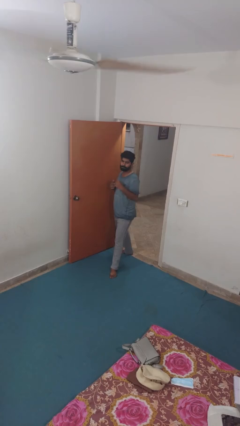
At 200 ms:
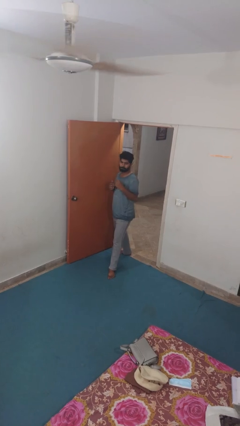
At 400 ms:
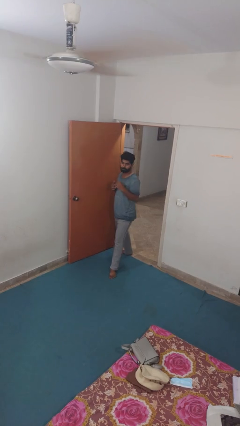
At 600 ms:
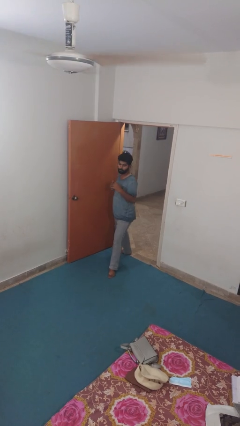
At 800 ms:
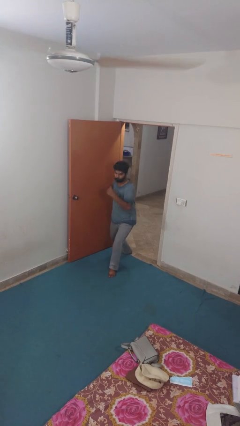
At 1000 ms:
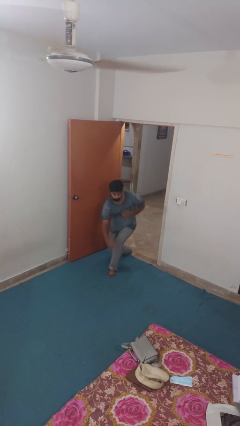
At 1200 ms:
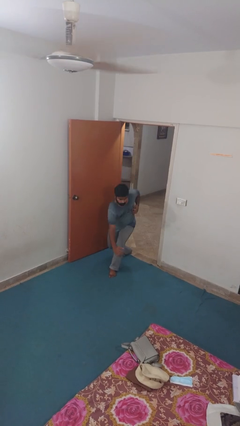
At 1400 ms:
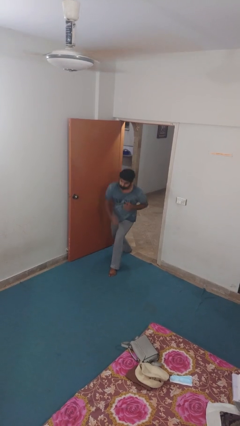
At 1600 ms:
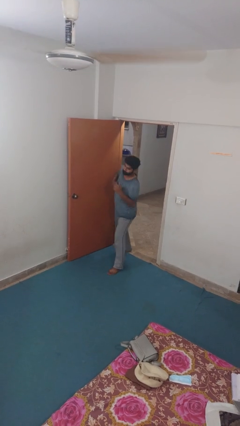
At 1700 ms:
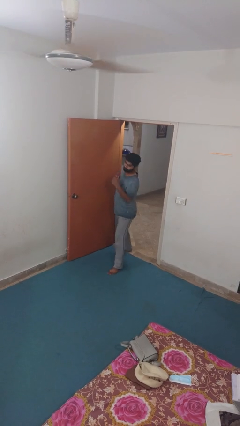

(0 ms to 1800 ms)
person karate chop

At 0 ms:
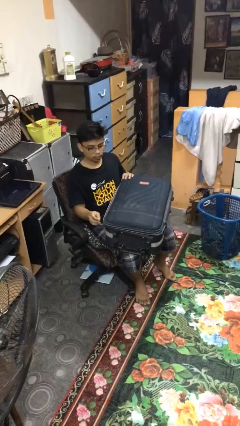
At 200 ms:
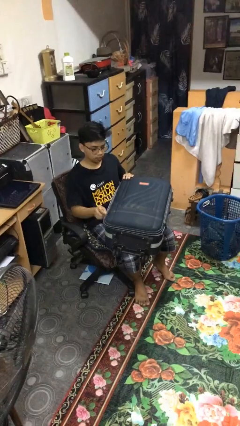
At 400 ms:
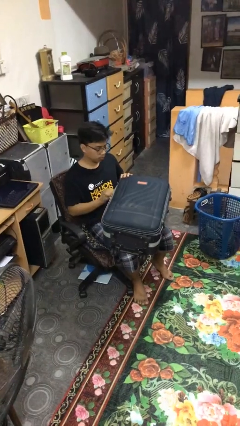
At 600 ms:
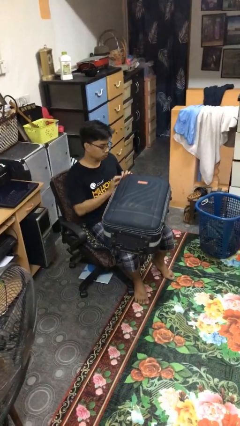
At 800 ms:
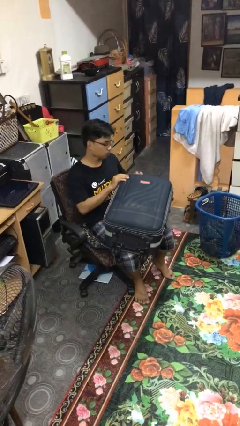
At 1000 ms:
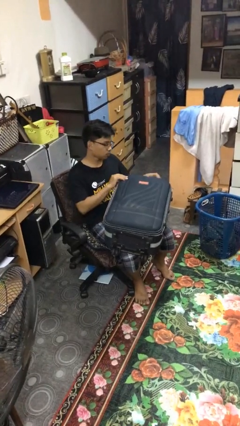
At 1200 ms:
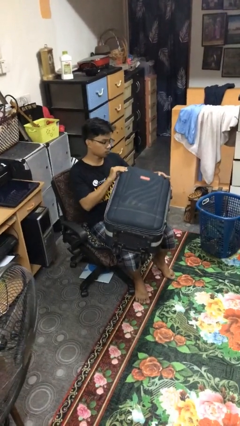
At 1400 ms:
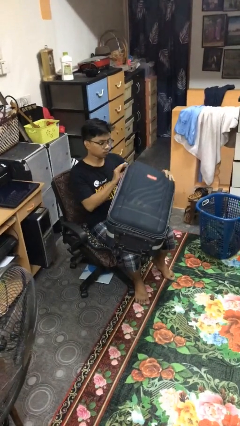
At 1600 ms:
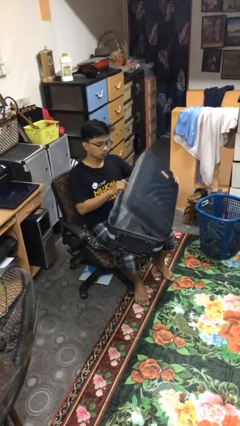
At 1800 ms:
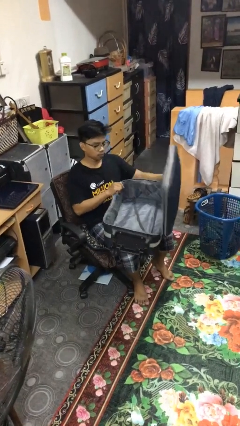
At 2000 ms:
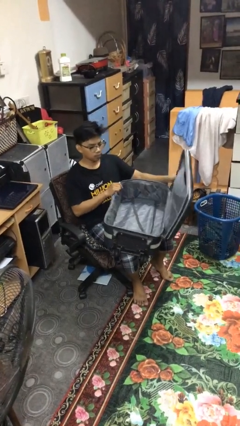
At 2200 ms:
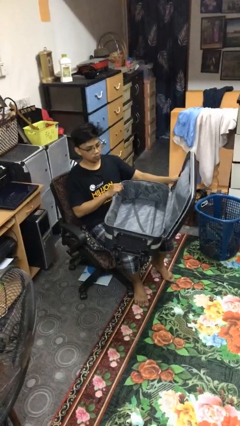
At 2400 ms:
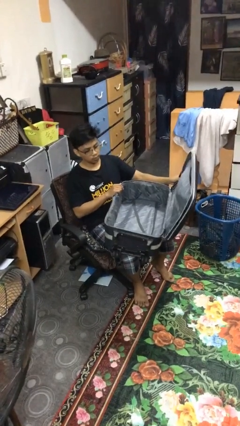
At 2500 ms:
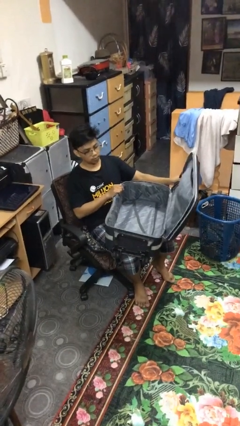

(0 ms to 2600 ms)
person opens suitcase

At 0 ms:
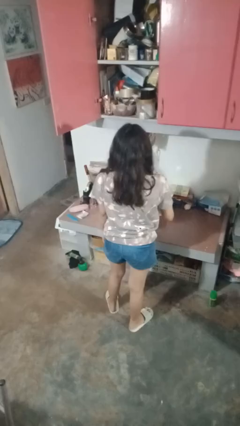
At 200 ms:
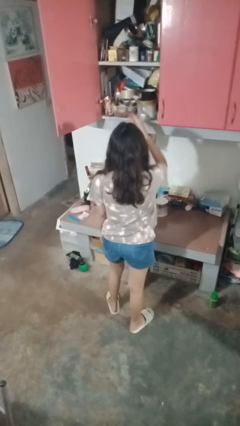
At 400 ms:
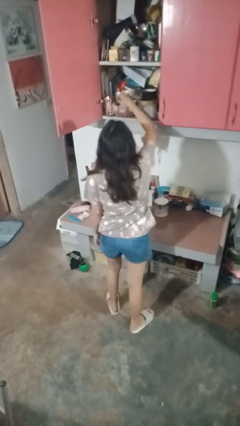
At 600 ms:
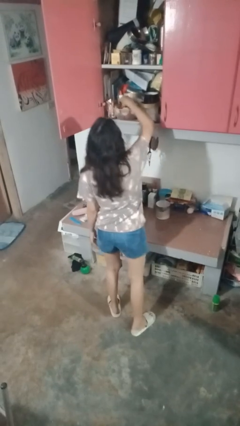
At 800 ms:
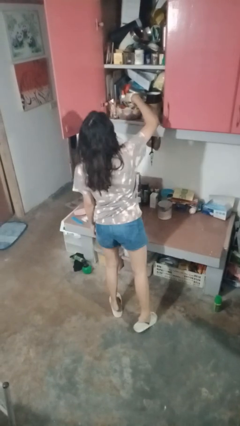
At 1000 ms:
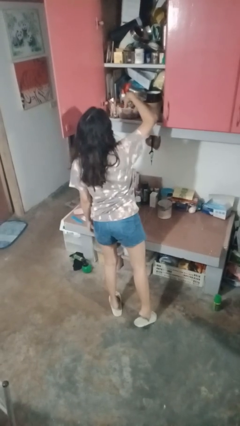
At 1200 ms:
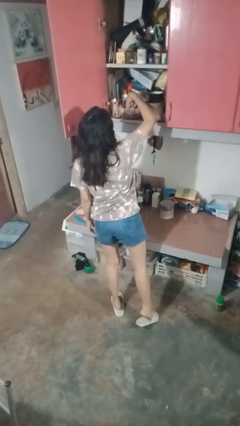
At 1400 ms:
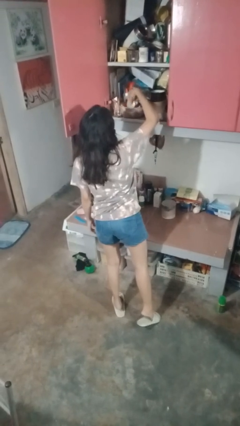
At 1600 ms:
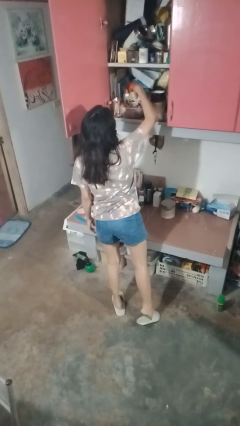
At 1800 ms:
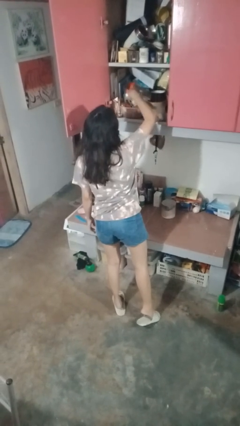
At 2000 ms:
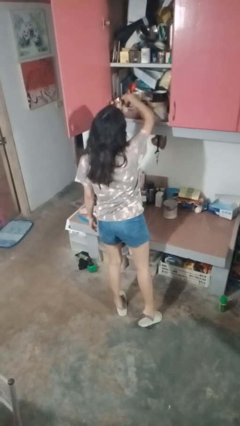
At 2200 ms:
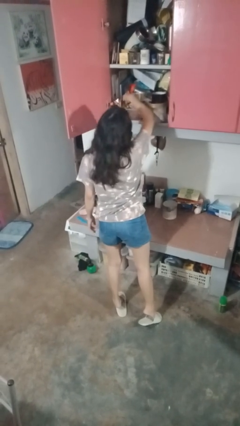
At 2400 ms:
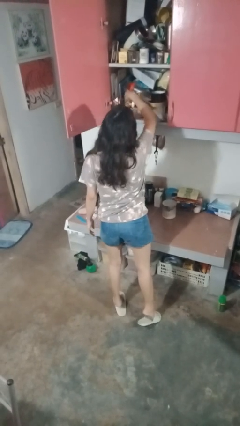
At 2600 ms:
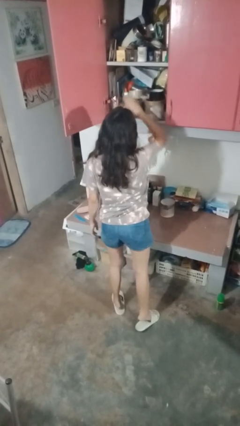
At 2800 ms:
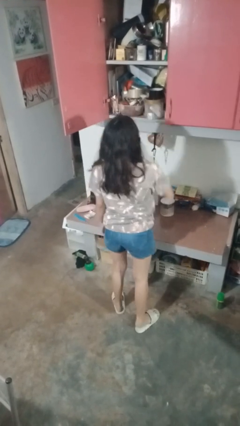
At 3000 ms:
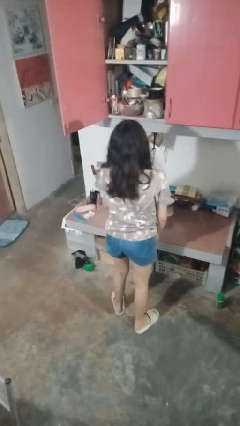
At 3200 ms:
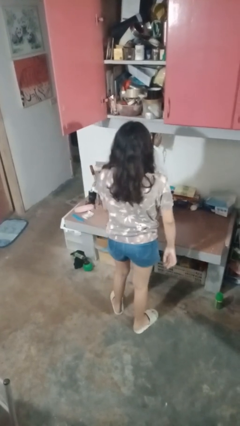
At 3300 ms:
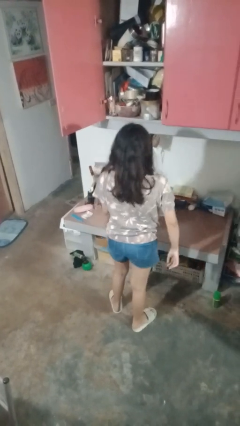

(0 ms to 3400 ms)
person searches in cabinet

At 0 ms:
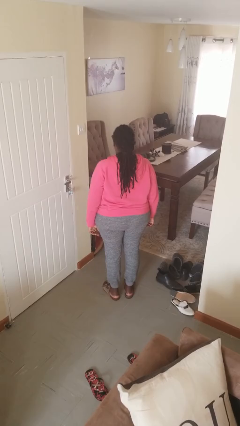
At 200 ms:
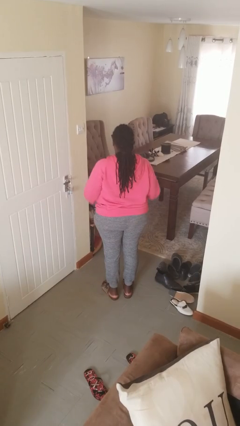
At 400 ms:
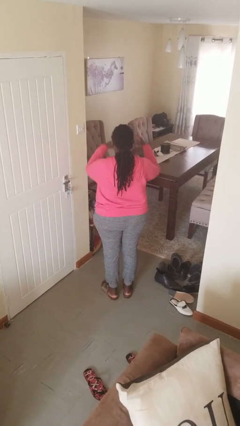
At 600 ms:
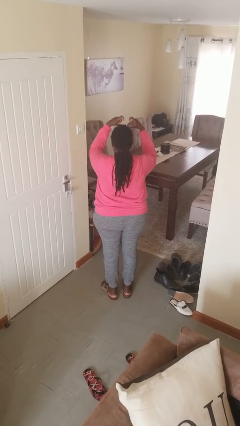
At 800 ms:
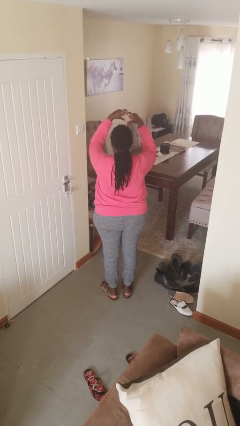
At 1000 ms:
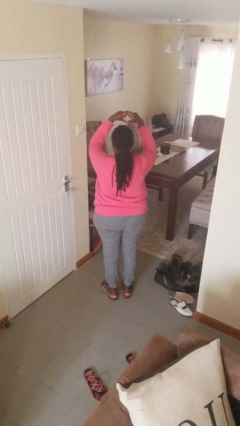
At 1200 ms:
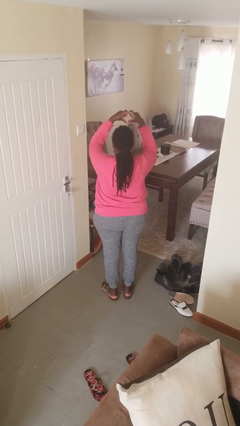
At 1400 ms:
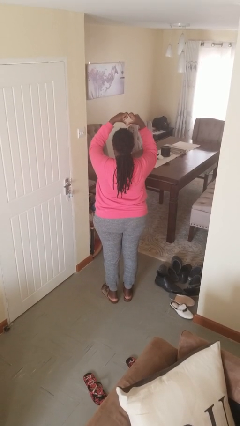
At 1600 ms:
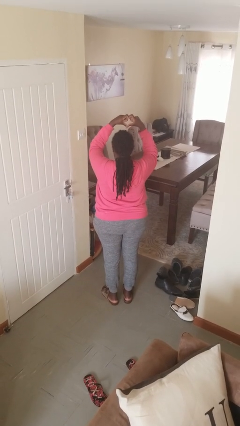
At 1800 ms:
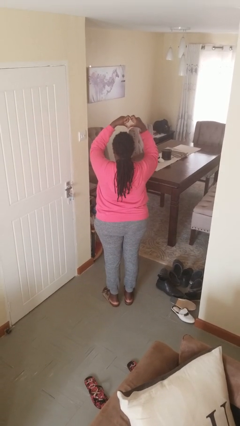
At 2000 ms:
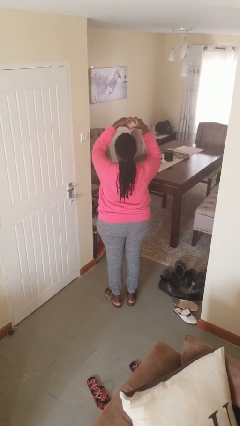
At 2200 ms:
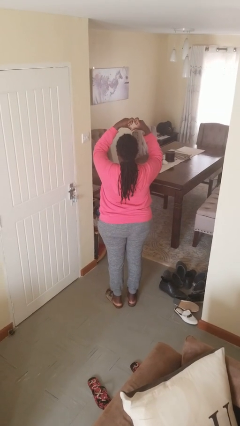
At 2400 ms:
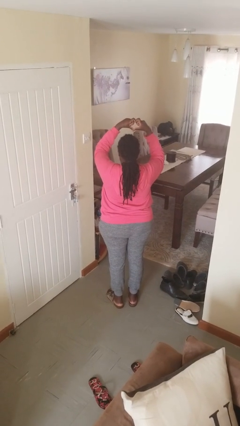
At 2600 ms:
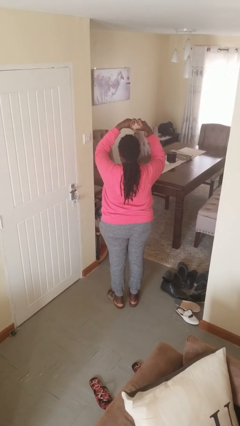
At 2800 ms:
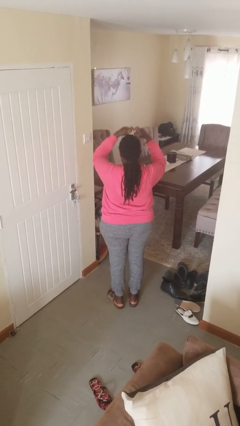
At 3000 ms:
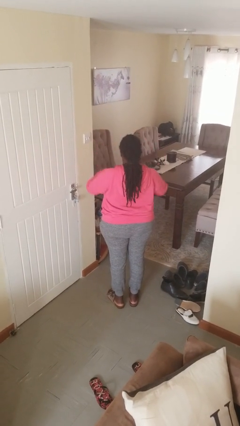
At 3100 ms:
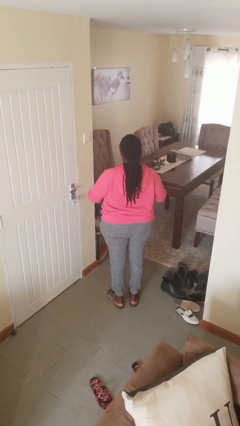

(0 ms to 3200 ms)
person gestures heart

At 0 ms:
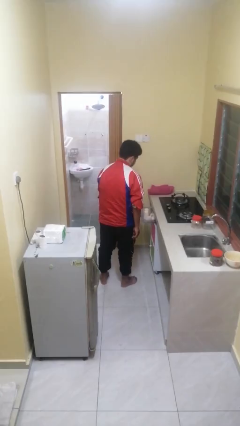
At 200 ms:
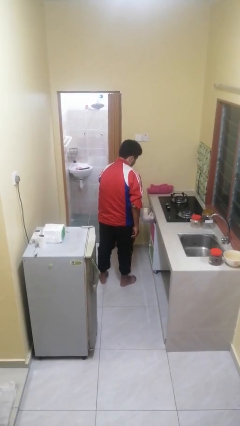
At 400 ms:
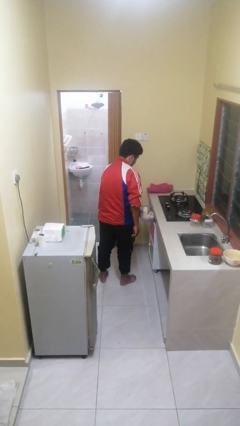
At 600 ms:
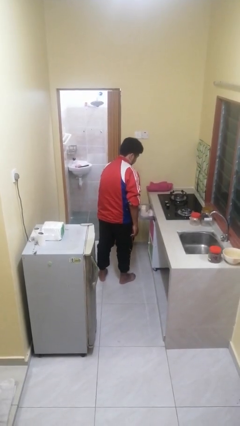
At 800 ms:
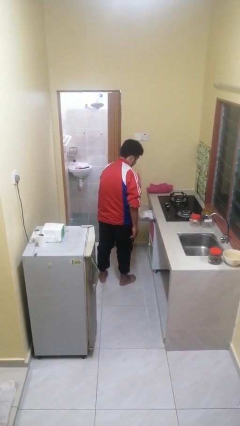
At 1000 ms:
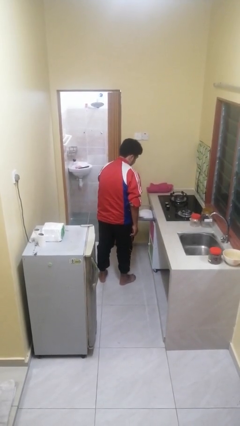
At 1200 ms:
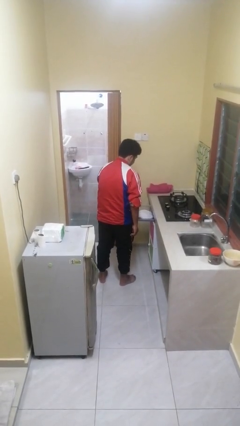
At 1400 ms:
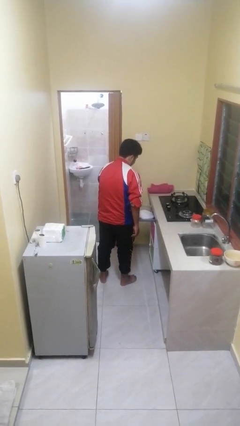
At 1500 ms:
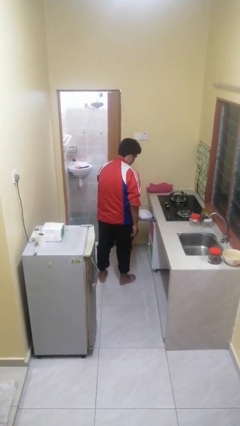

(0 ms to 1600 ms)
person opens kitchen drawer

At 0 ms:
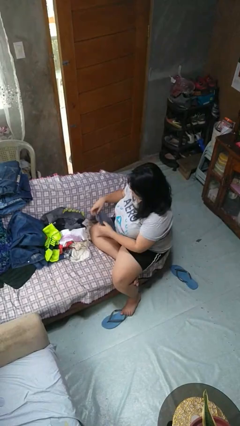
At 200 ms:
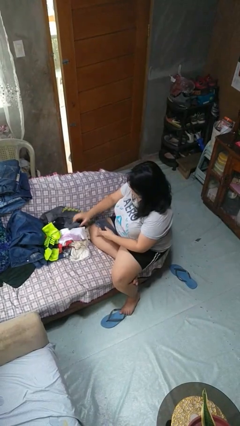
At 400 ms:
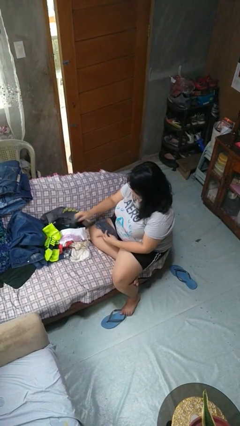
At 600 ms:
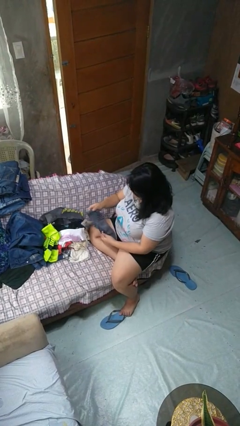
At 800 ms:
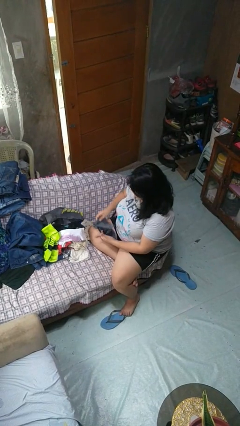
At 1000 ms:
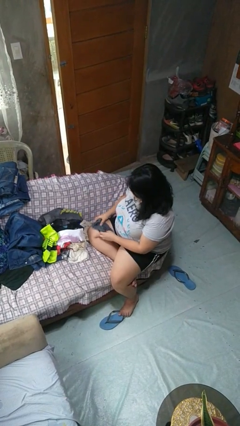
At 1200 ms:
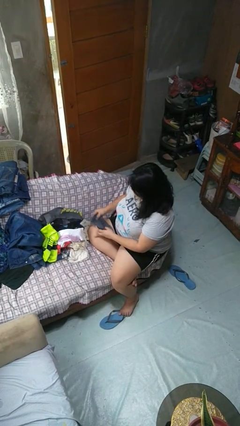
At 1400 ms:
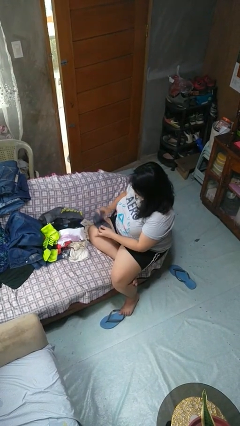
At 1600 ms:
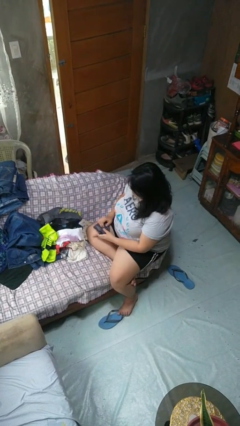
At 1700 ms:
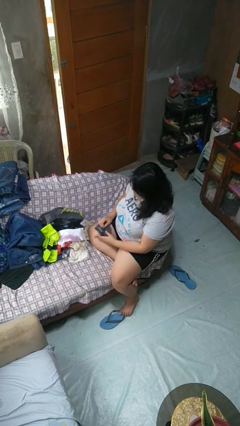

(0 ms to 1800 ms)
person folds socks

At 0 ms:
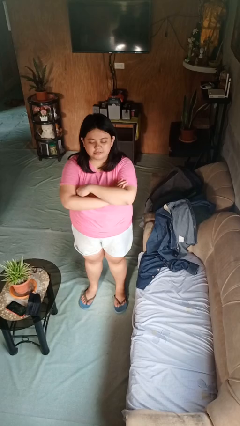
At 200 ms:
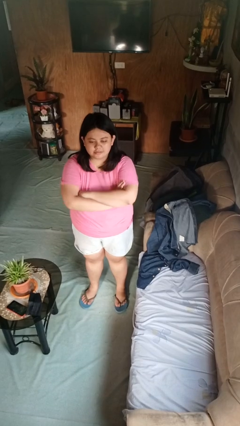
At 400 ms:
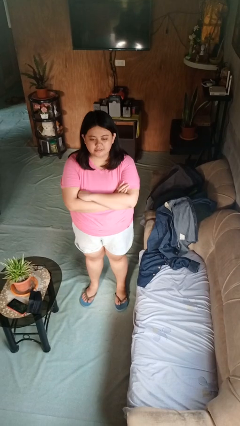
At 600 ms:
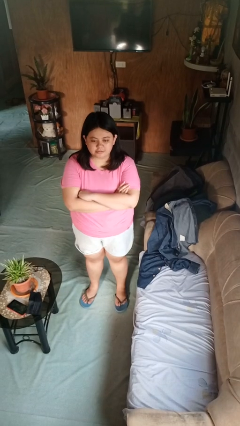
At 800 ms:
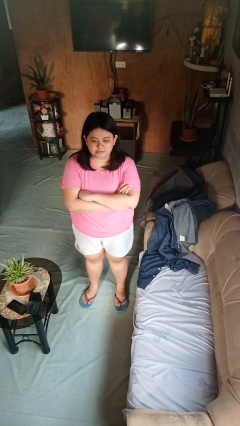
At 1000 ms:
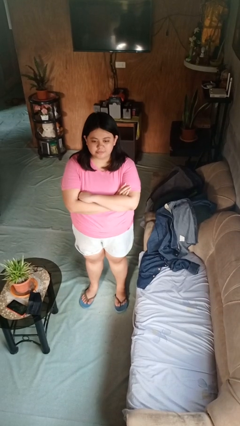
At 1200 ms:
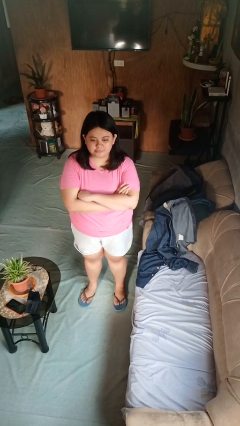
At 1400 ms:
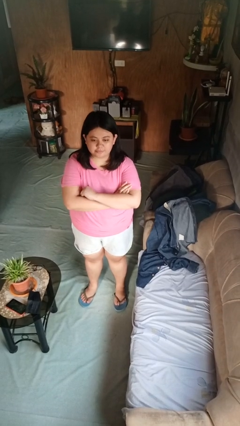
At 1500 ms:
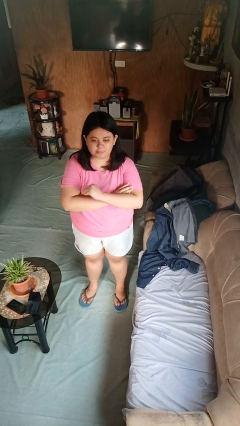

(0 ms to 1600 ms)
person crosses arms

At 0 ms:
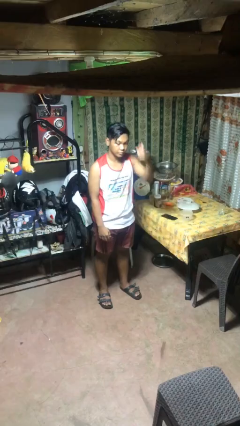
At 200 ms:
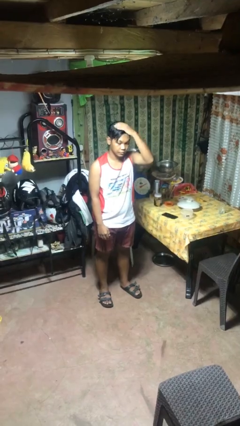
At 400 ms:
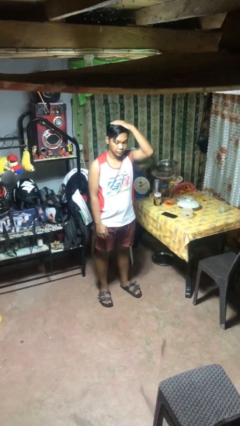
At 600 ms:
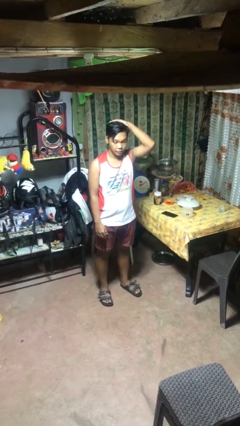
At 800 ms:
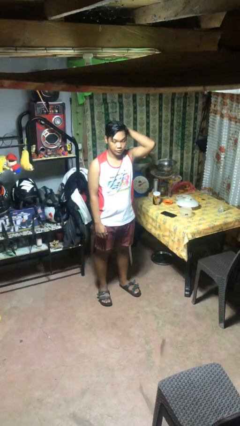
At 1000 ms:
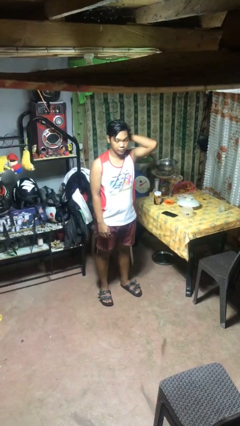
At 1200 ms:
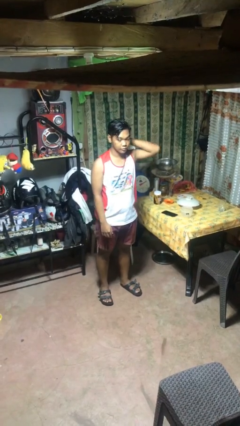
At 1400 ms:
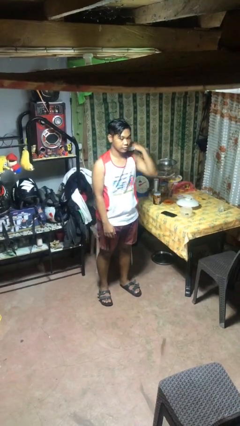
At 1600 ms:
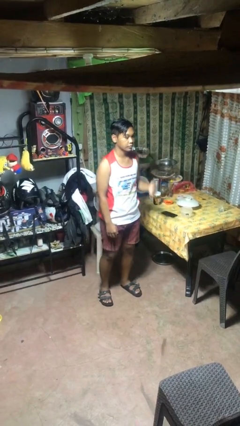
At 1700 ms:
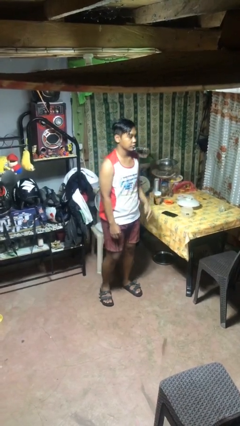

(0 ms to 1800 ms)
person pats head
